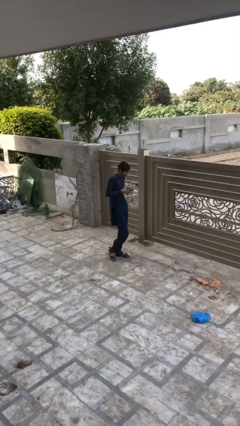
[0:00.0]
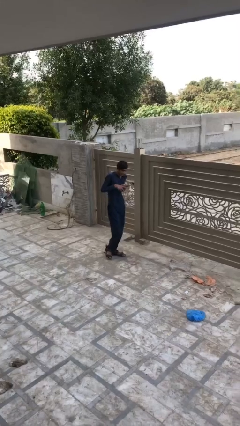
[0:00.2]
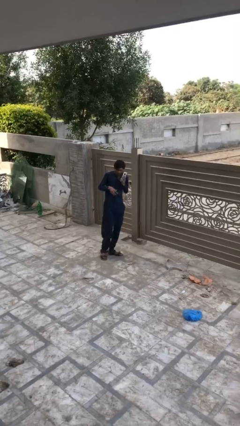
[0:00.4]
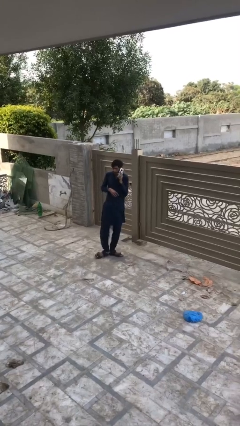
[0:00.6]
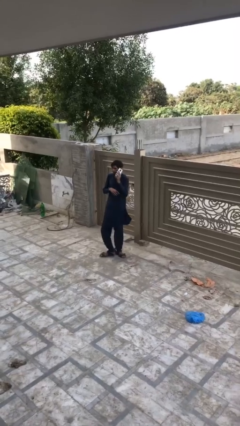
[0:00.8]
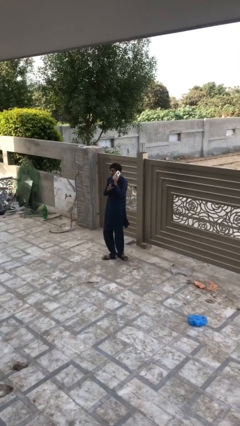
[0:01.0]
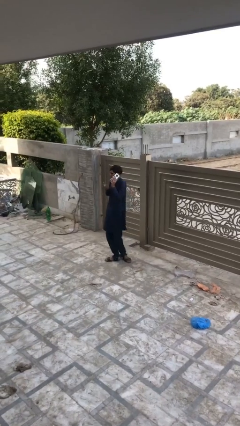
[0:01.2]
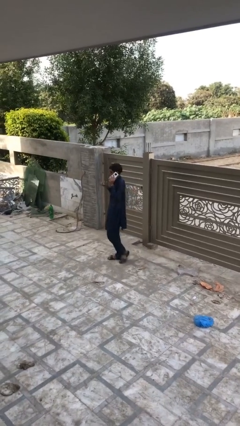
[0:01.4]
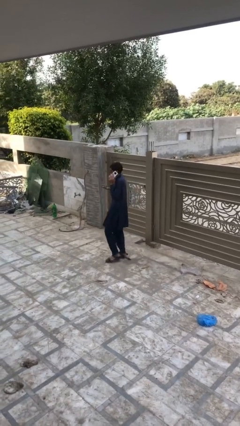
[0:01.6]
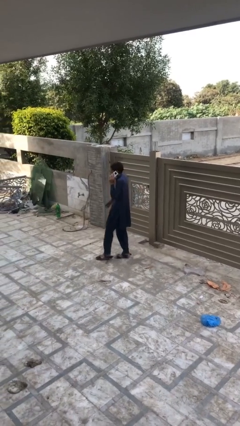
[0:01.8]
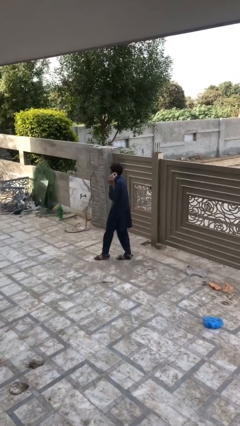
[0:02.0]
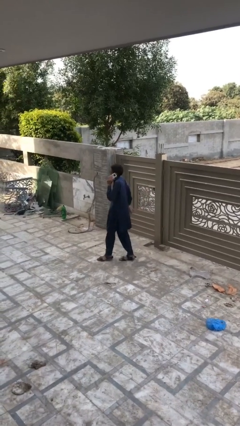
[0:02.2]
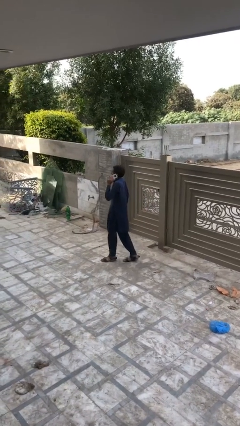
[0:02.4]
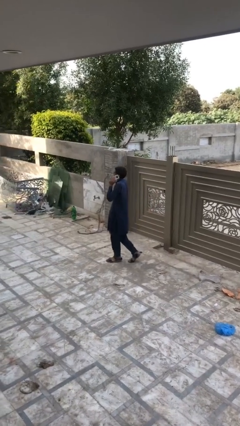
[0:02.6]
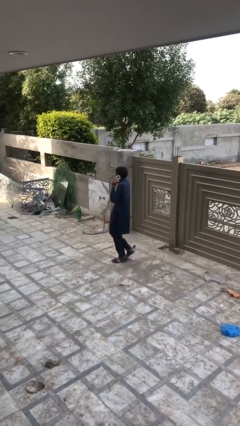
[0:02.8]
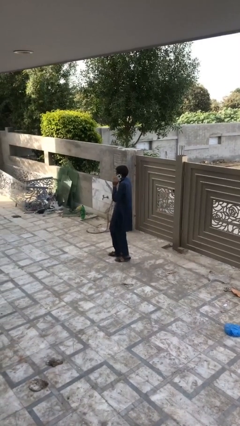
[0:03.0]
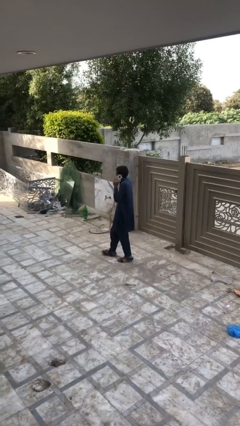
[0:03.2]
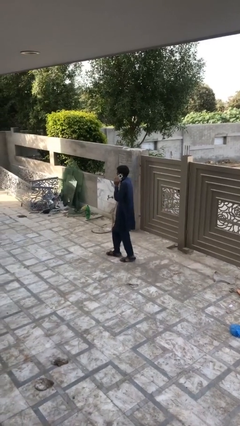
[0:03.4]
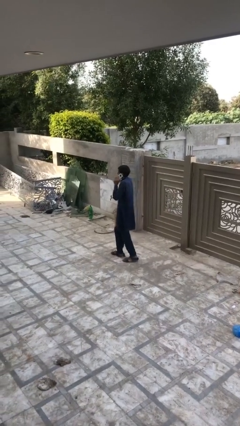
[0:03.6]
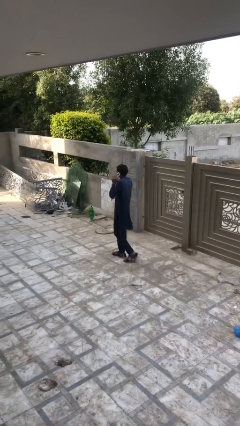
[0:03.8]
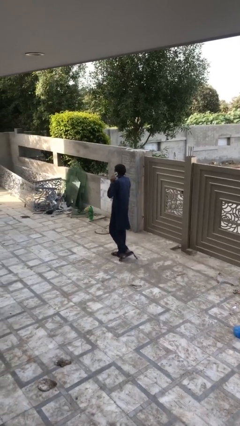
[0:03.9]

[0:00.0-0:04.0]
person talks on phone

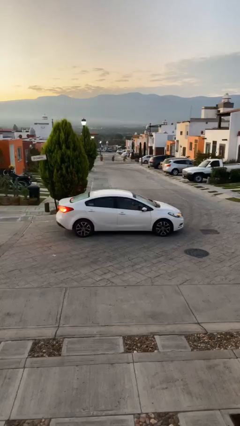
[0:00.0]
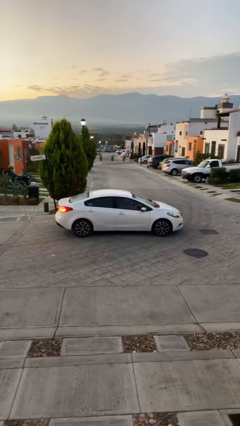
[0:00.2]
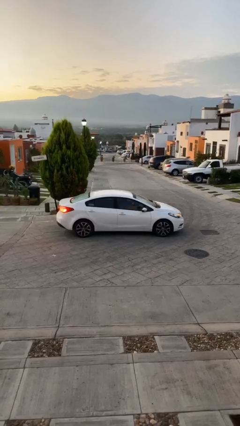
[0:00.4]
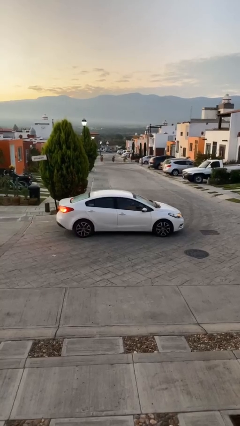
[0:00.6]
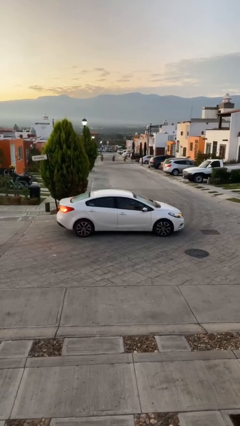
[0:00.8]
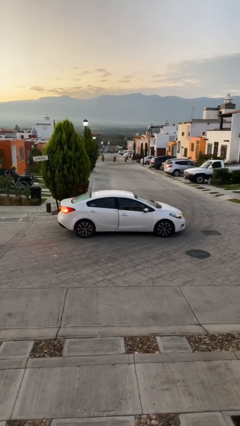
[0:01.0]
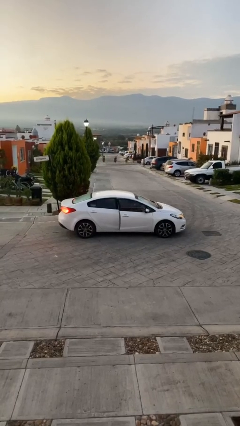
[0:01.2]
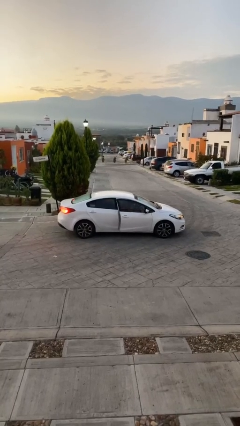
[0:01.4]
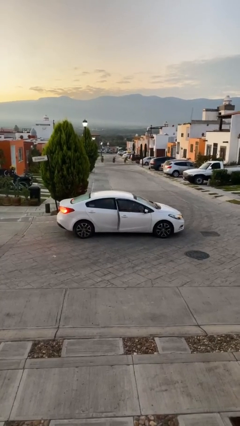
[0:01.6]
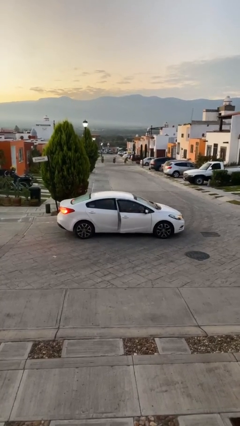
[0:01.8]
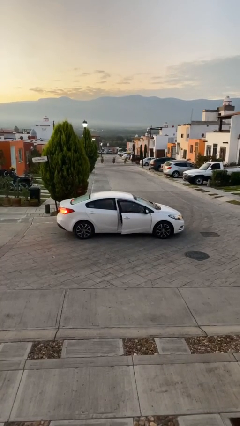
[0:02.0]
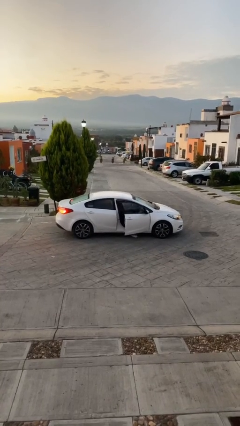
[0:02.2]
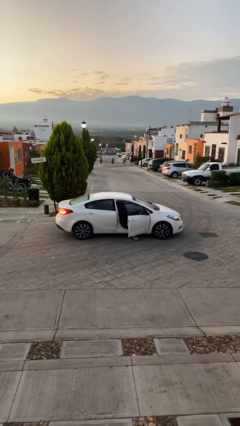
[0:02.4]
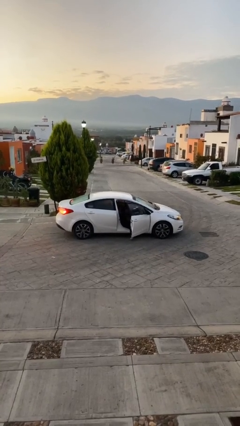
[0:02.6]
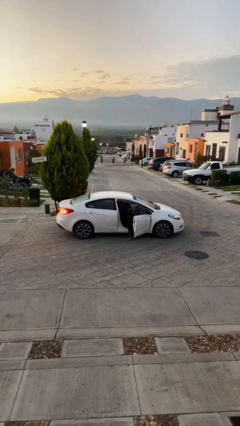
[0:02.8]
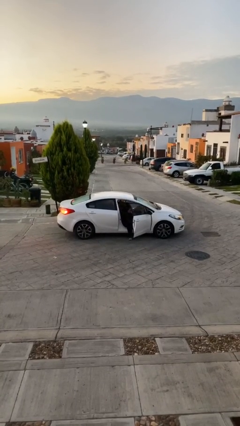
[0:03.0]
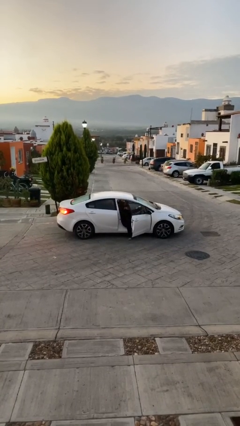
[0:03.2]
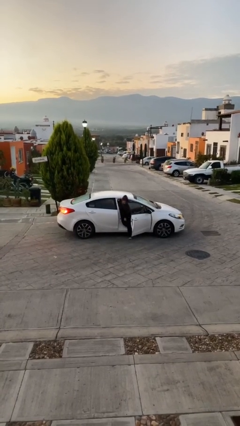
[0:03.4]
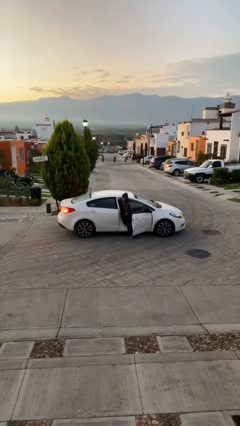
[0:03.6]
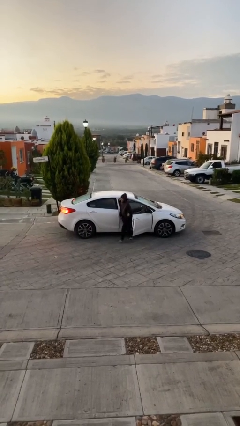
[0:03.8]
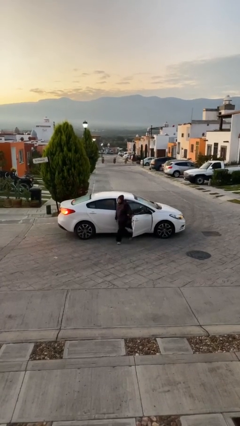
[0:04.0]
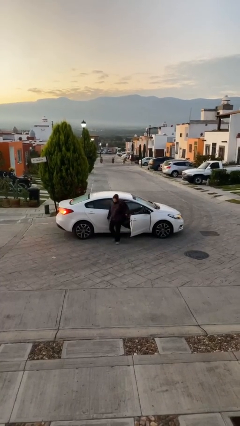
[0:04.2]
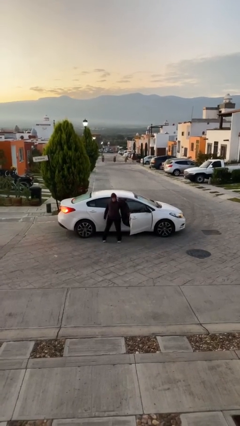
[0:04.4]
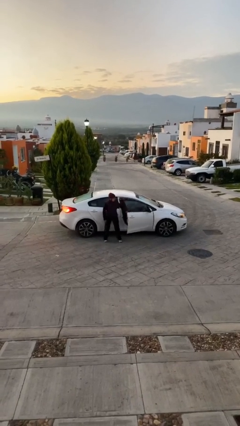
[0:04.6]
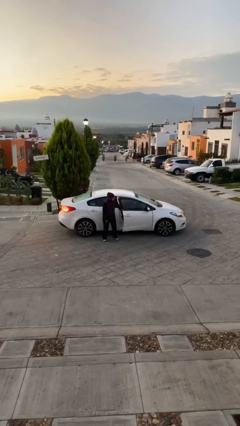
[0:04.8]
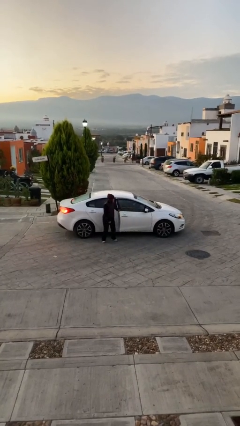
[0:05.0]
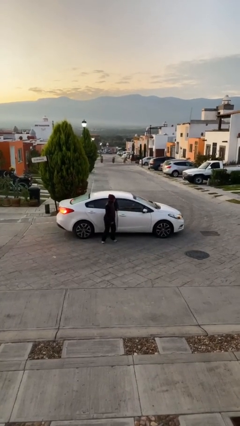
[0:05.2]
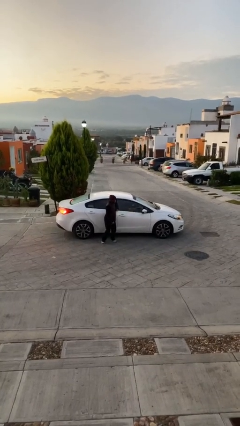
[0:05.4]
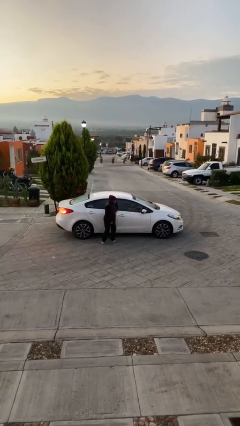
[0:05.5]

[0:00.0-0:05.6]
car drops off person

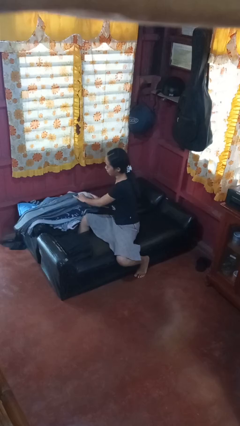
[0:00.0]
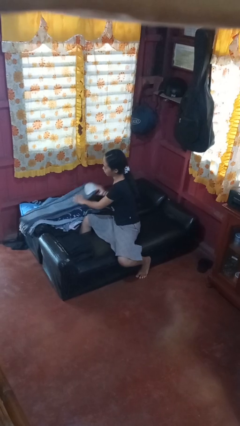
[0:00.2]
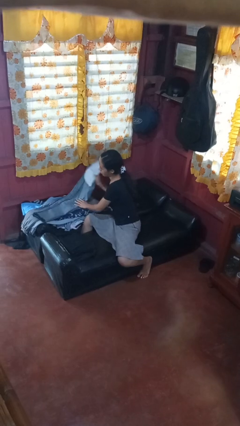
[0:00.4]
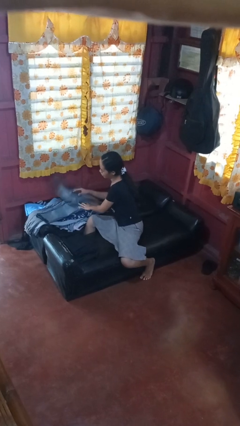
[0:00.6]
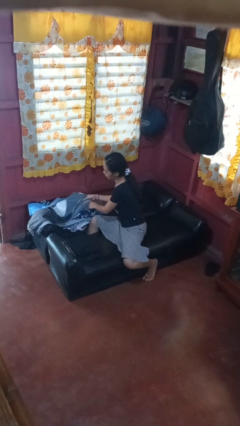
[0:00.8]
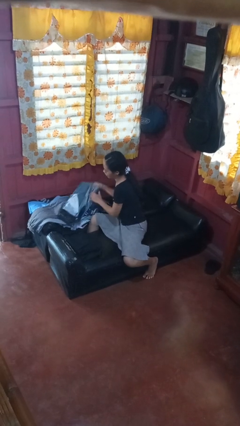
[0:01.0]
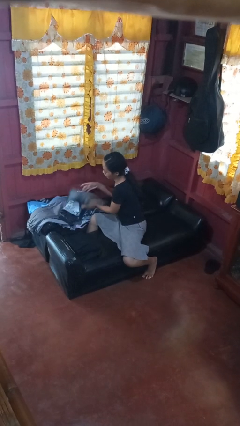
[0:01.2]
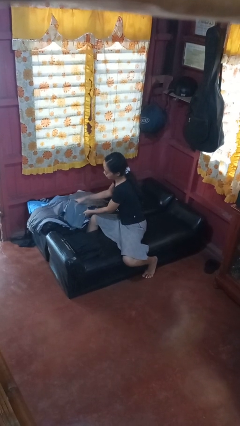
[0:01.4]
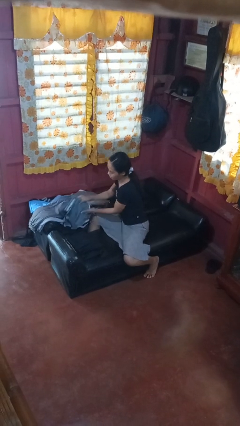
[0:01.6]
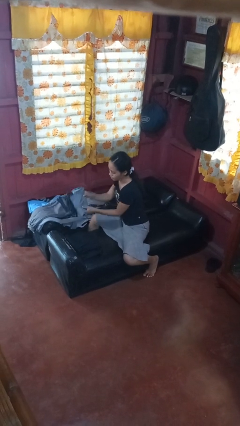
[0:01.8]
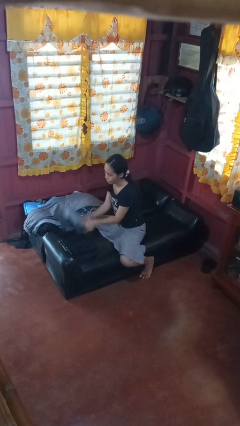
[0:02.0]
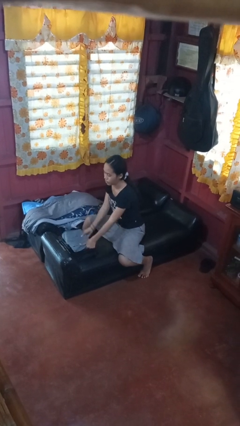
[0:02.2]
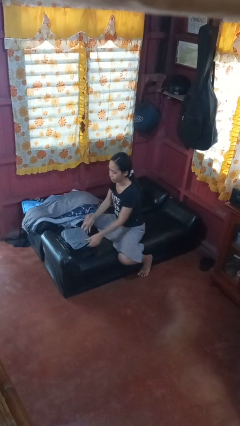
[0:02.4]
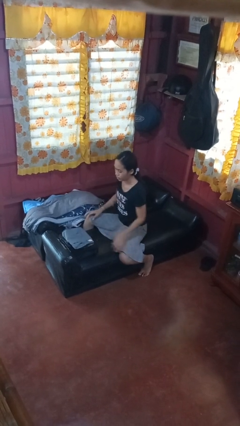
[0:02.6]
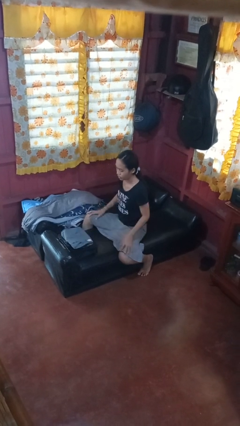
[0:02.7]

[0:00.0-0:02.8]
person folds pants

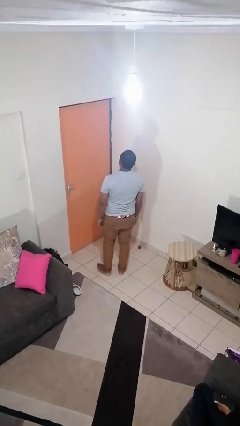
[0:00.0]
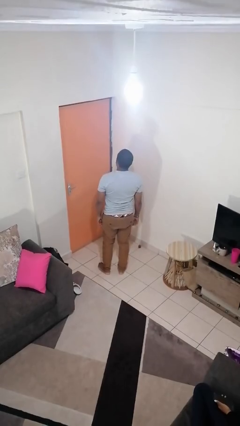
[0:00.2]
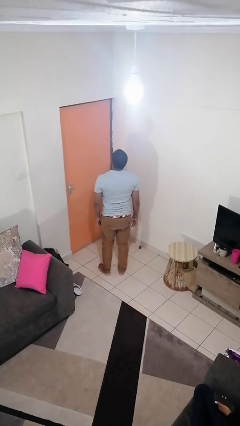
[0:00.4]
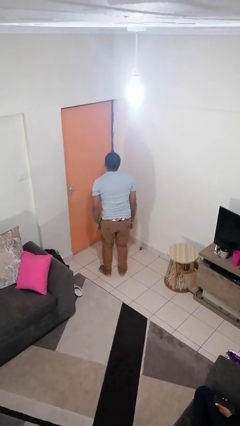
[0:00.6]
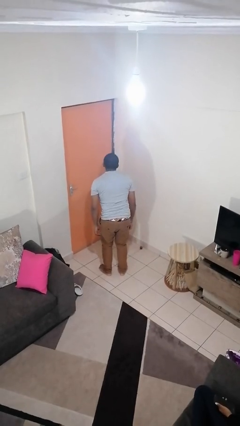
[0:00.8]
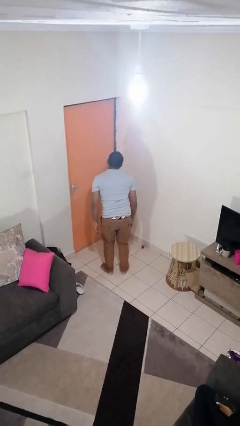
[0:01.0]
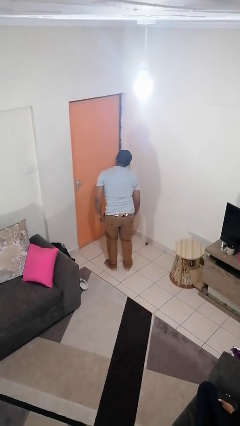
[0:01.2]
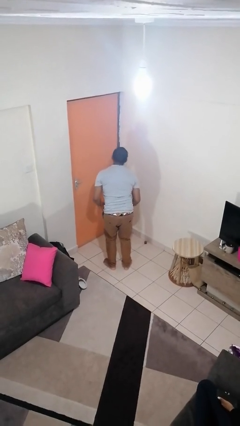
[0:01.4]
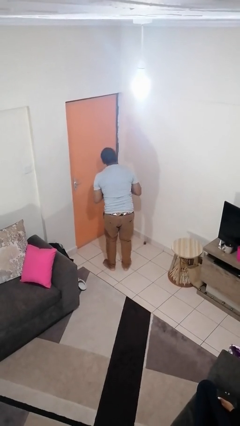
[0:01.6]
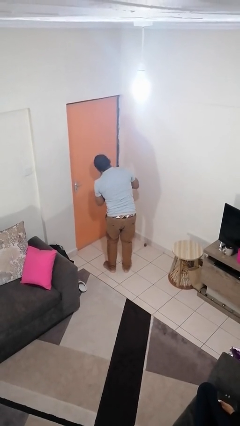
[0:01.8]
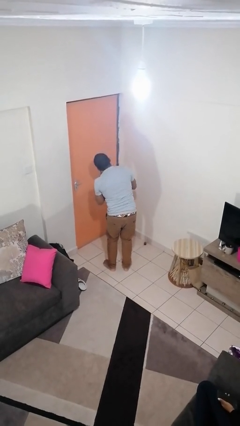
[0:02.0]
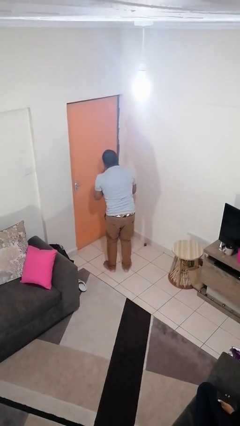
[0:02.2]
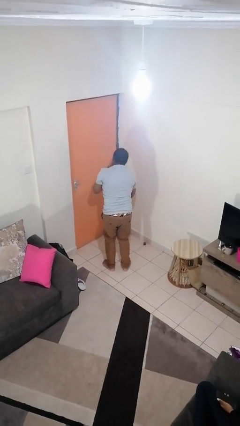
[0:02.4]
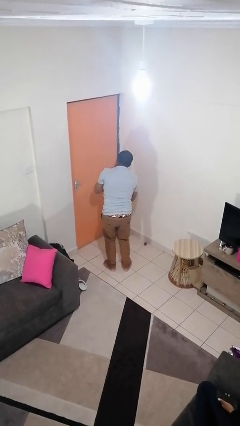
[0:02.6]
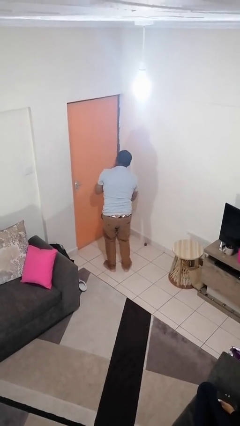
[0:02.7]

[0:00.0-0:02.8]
person sticks out tongue

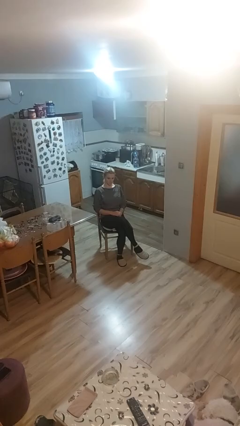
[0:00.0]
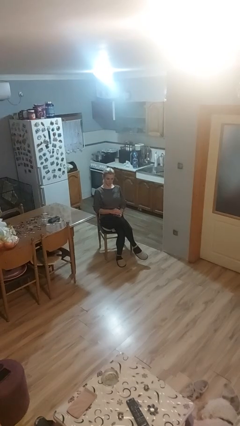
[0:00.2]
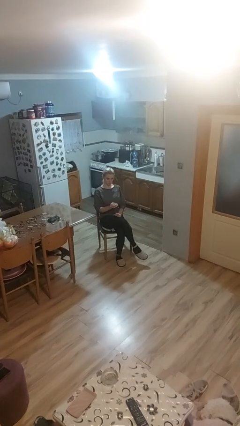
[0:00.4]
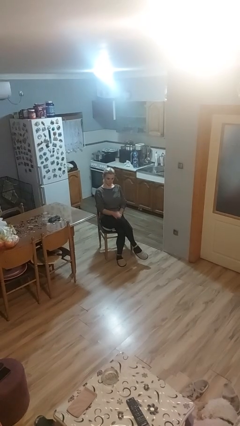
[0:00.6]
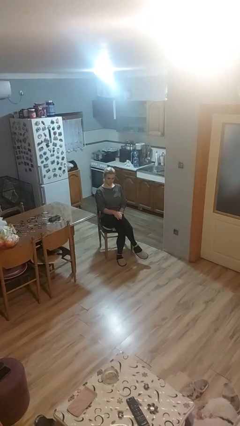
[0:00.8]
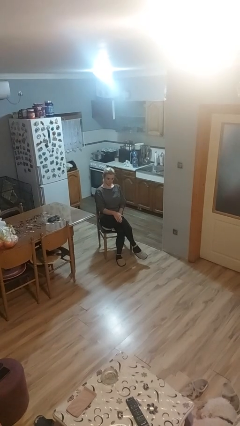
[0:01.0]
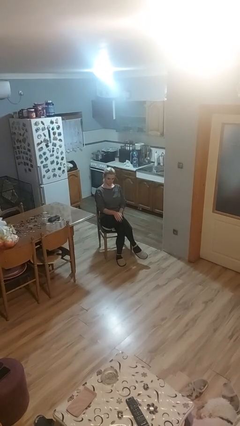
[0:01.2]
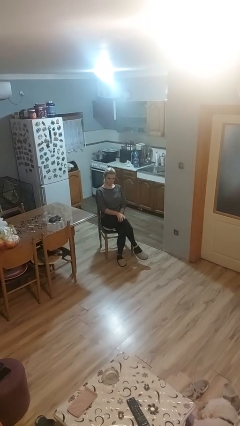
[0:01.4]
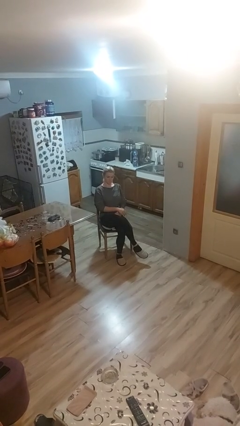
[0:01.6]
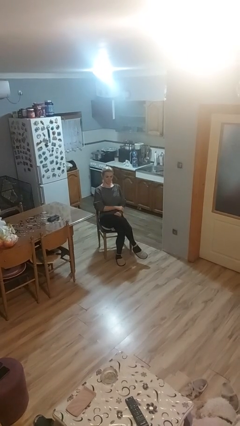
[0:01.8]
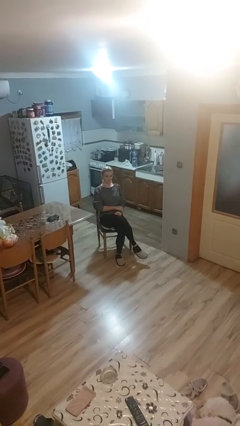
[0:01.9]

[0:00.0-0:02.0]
person slaps hands on thighs

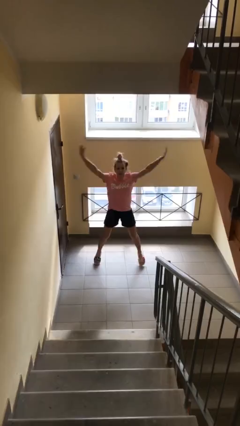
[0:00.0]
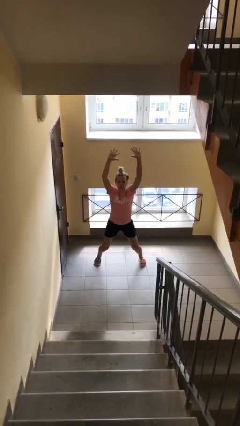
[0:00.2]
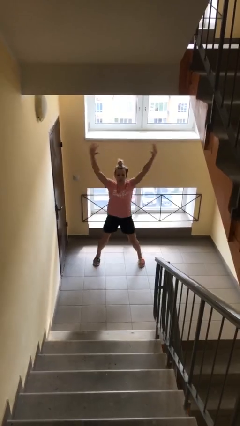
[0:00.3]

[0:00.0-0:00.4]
person exercises with jumping jacks
